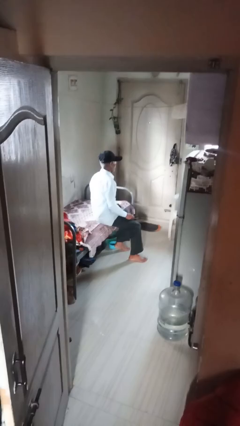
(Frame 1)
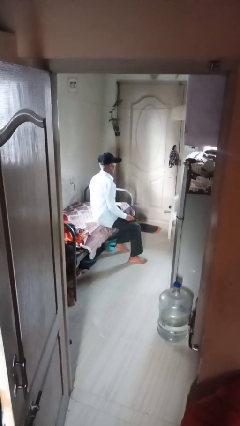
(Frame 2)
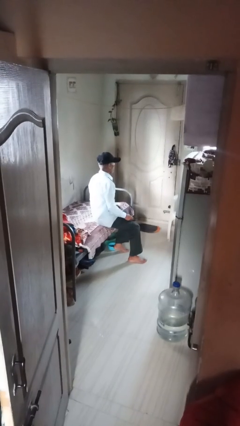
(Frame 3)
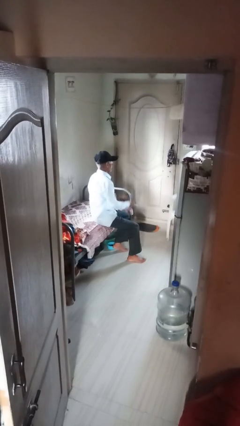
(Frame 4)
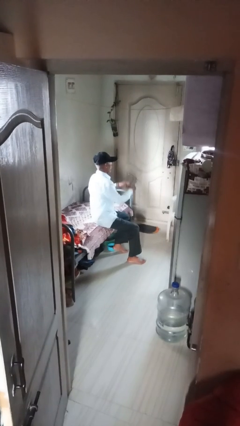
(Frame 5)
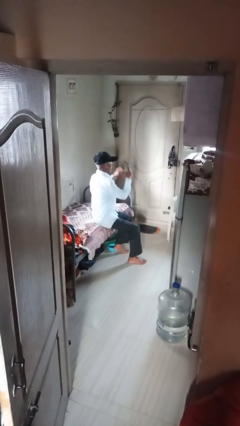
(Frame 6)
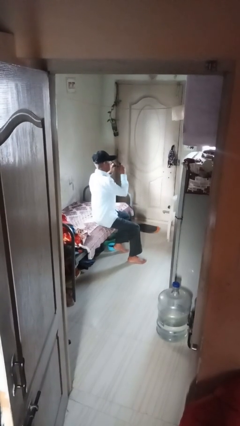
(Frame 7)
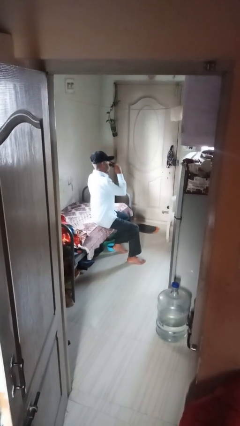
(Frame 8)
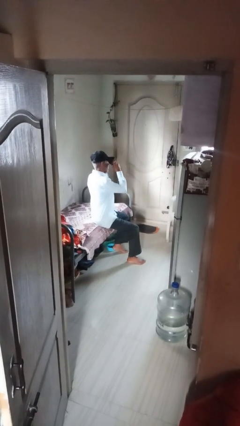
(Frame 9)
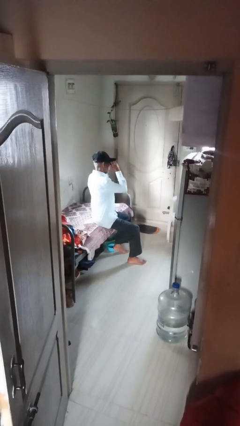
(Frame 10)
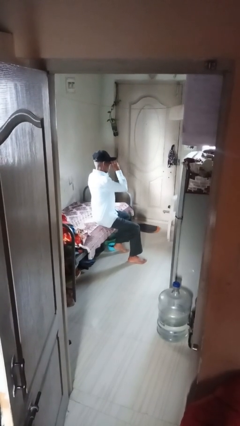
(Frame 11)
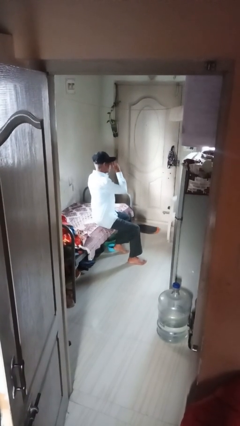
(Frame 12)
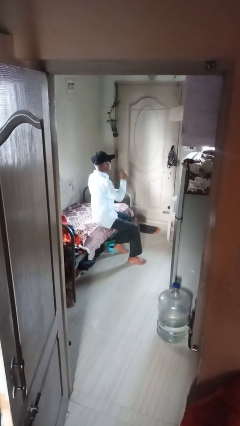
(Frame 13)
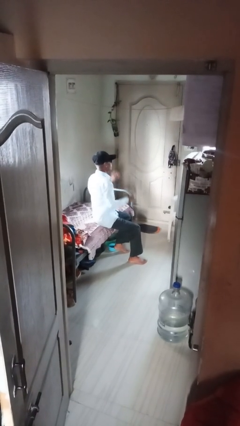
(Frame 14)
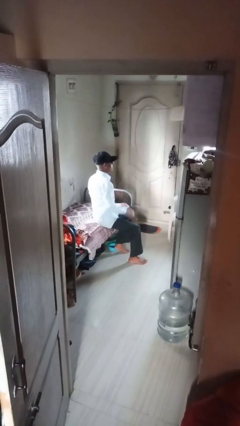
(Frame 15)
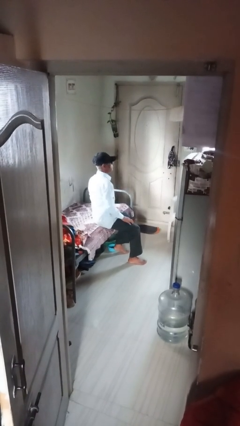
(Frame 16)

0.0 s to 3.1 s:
person puts on sunglasses

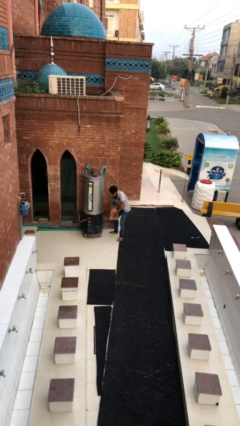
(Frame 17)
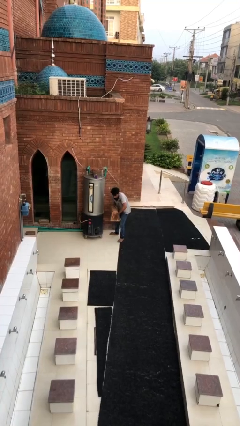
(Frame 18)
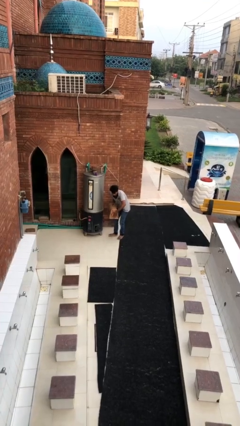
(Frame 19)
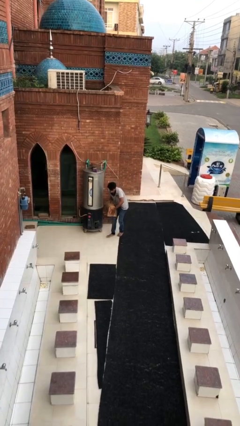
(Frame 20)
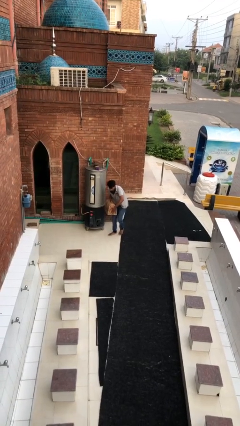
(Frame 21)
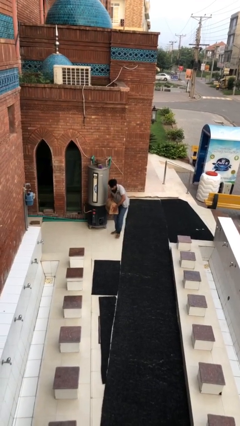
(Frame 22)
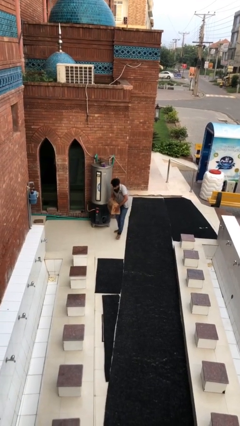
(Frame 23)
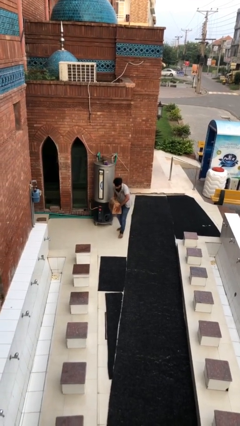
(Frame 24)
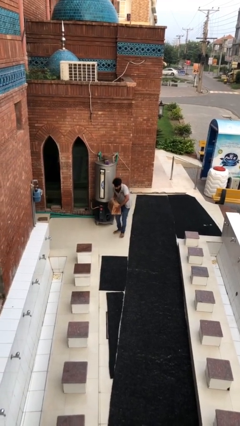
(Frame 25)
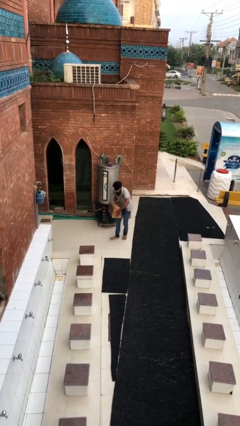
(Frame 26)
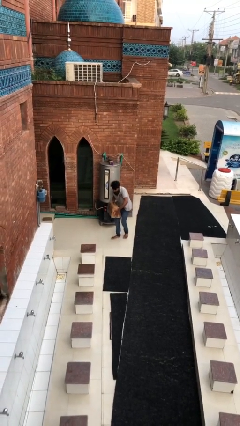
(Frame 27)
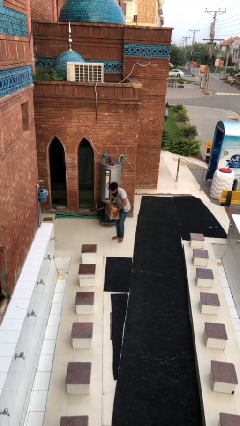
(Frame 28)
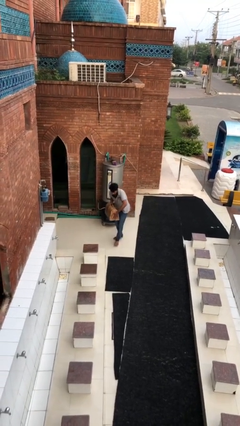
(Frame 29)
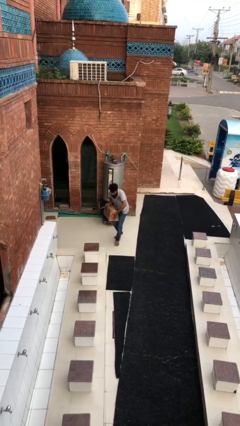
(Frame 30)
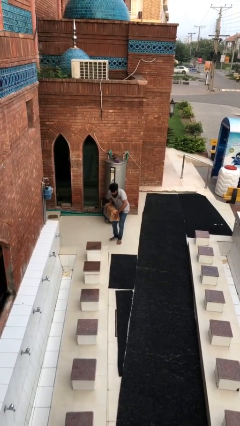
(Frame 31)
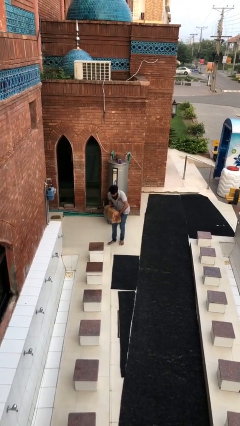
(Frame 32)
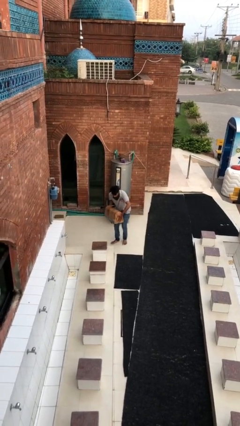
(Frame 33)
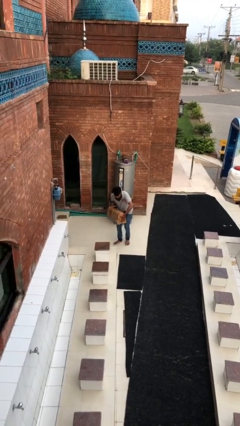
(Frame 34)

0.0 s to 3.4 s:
person carries heavy object

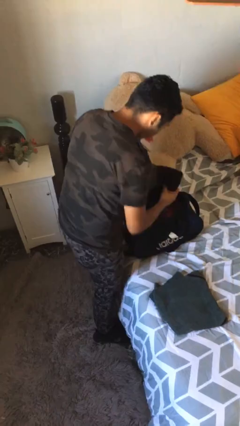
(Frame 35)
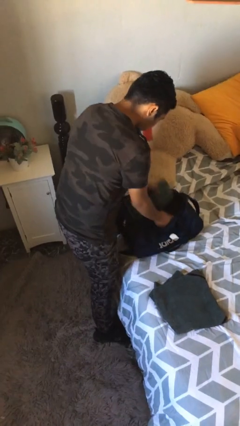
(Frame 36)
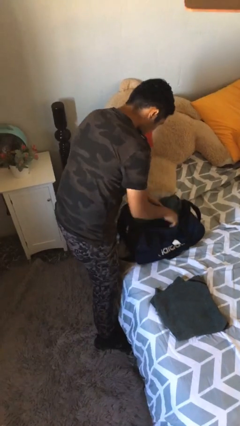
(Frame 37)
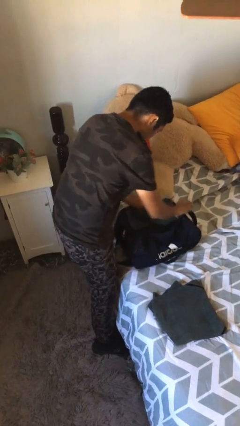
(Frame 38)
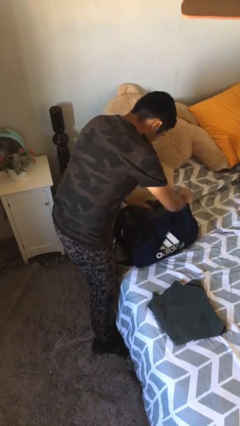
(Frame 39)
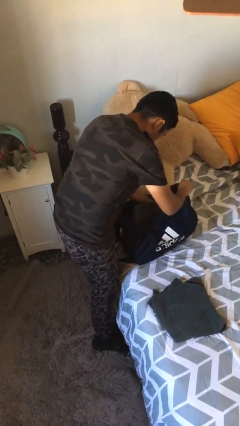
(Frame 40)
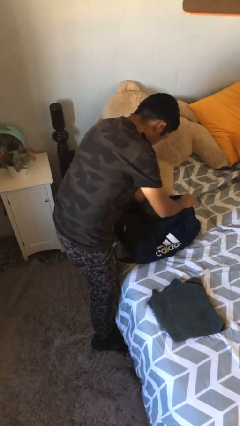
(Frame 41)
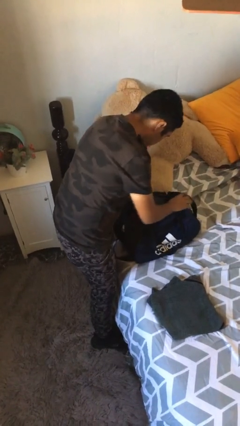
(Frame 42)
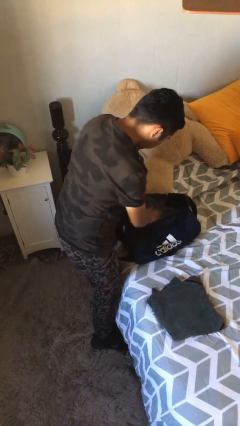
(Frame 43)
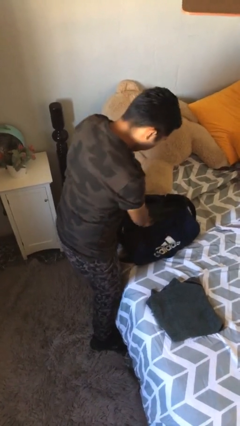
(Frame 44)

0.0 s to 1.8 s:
person loads clothes into suitcase

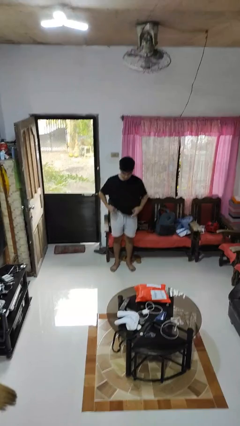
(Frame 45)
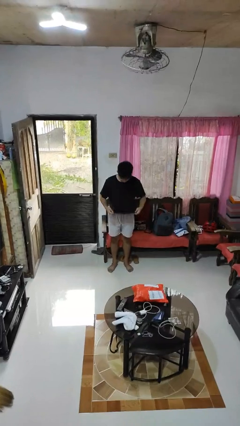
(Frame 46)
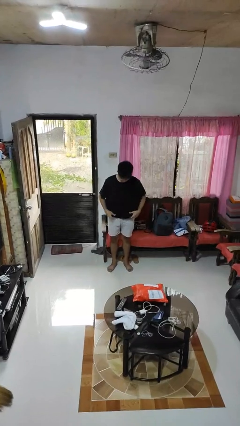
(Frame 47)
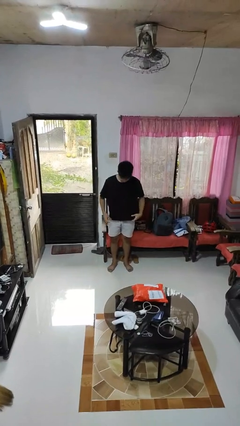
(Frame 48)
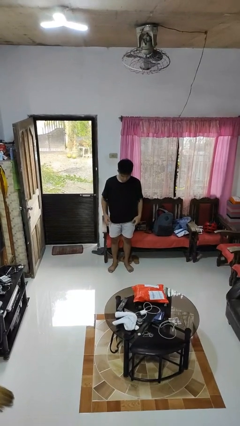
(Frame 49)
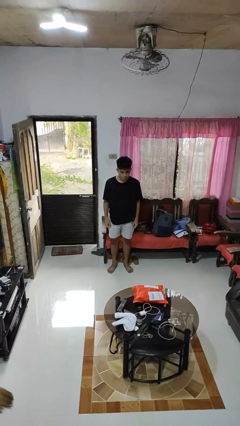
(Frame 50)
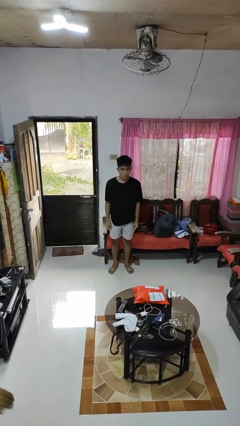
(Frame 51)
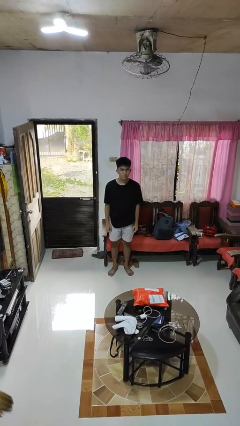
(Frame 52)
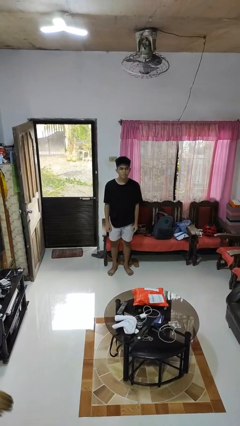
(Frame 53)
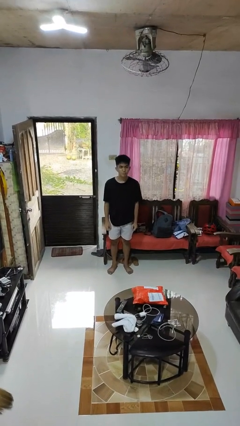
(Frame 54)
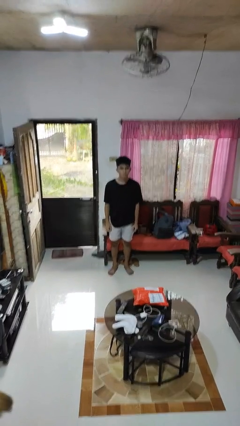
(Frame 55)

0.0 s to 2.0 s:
person untucks shirt

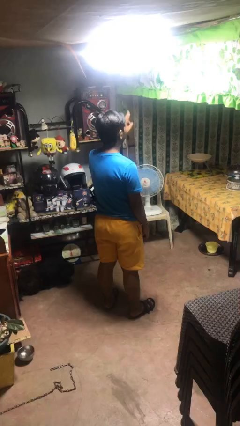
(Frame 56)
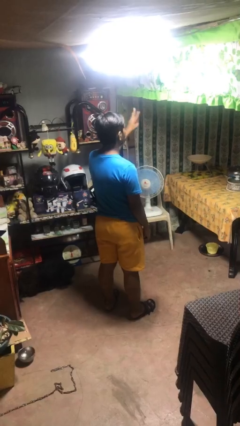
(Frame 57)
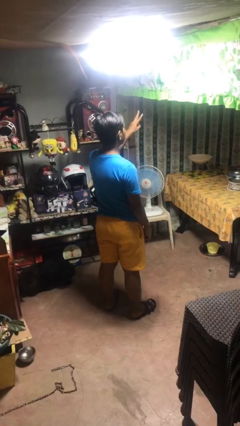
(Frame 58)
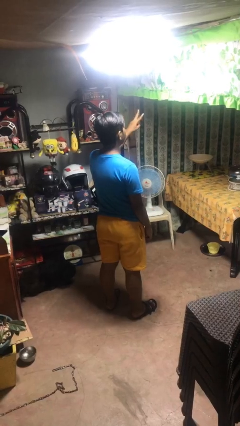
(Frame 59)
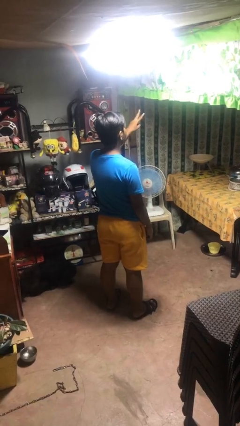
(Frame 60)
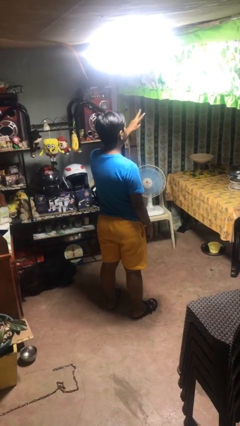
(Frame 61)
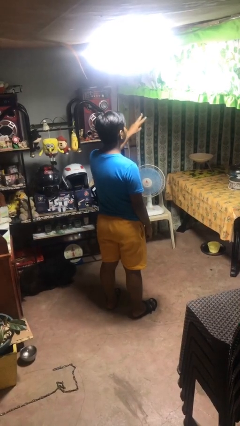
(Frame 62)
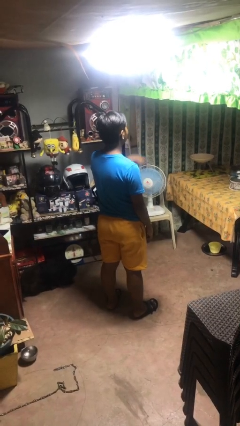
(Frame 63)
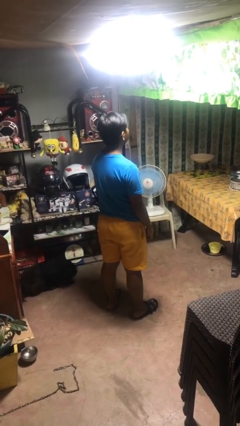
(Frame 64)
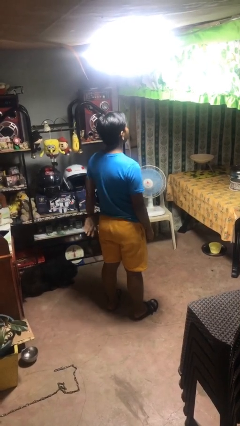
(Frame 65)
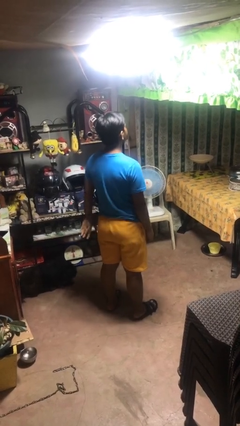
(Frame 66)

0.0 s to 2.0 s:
person gestures peace

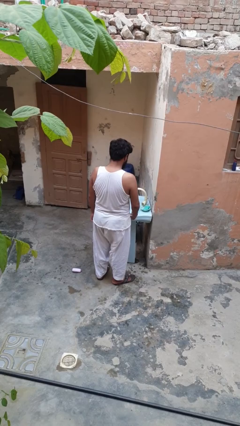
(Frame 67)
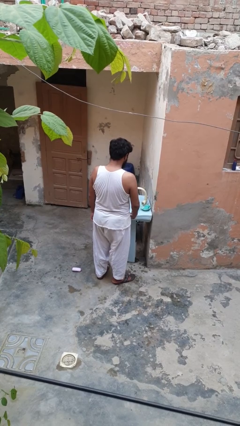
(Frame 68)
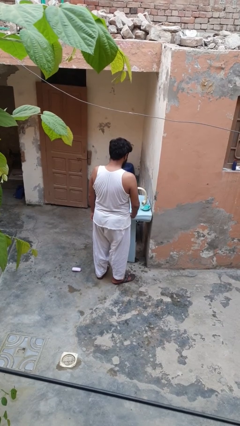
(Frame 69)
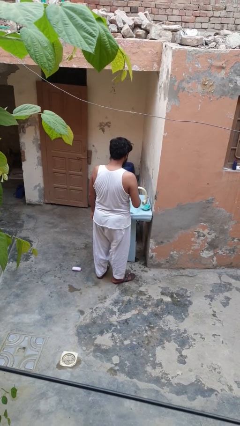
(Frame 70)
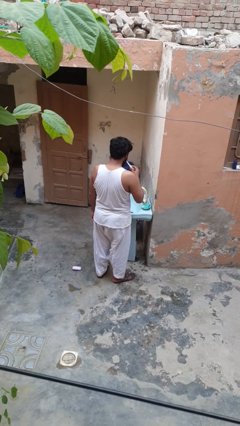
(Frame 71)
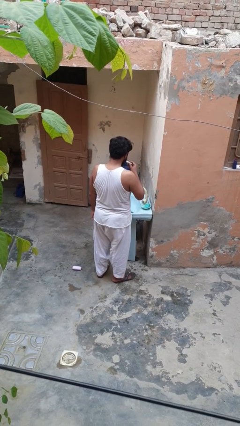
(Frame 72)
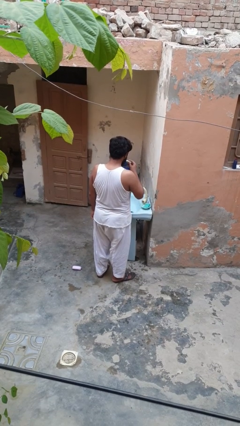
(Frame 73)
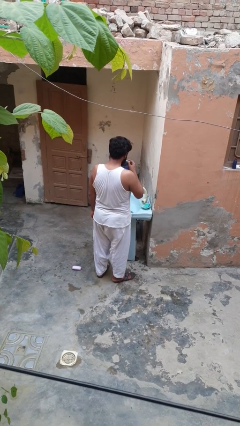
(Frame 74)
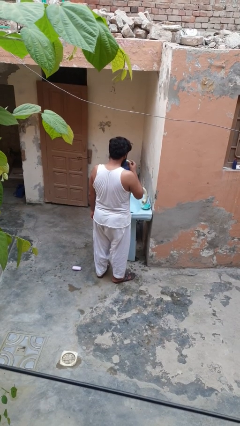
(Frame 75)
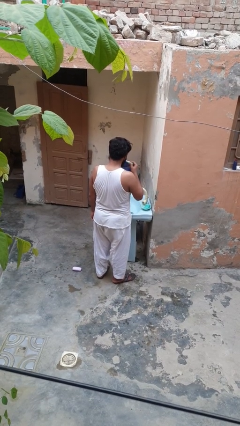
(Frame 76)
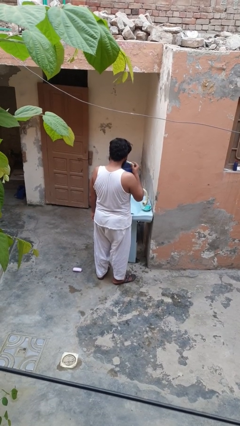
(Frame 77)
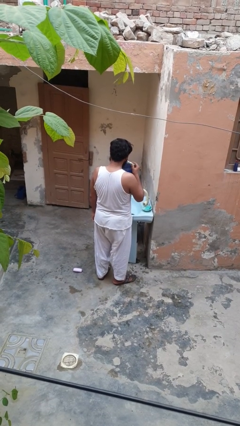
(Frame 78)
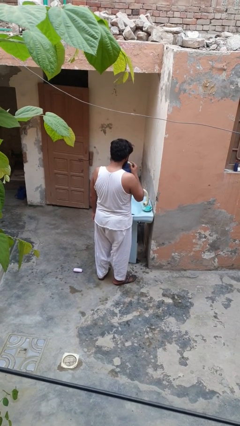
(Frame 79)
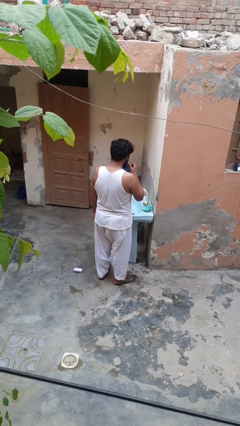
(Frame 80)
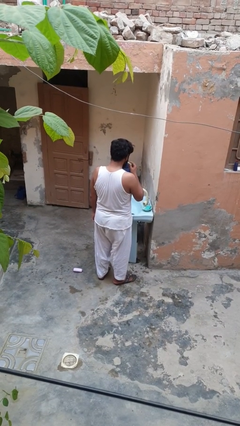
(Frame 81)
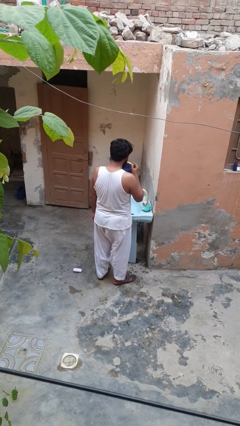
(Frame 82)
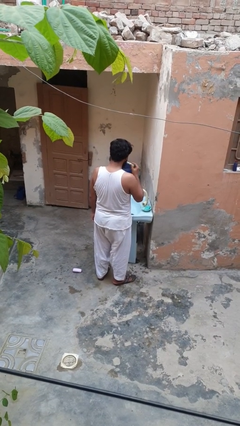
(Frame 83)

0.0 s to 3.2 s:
person brushes teeth

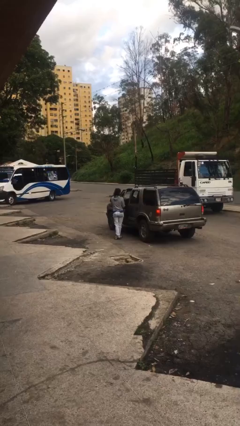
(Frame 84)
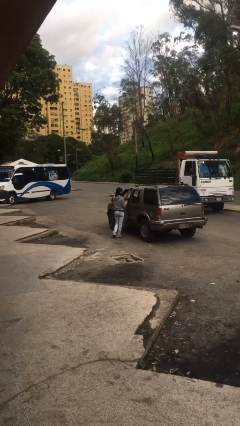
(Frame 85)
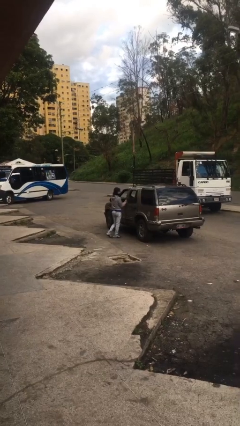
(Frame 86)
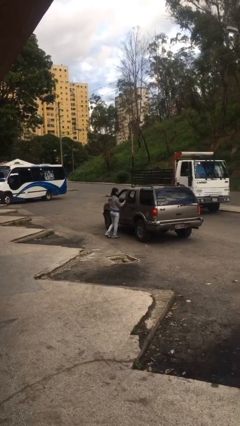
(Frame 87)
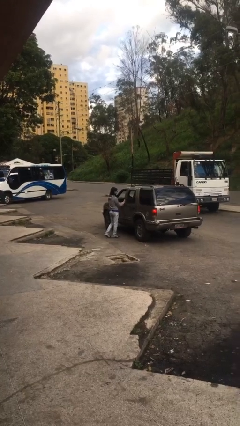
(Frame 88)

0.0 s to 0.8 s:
person closes car door

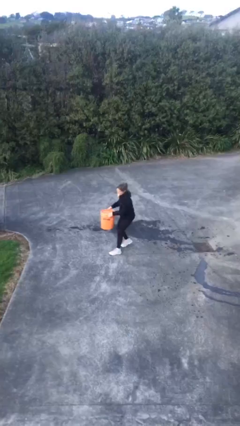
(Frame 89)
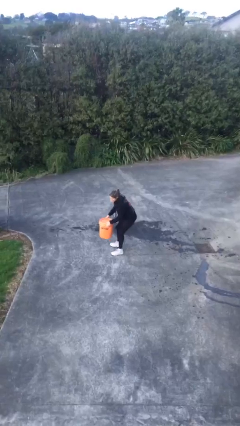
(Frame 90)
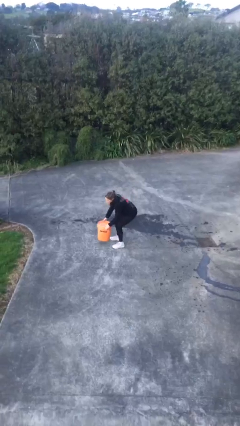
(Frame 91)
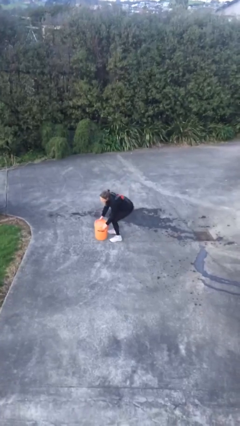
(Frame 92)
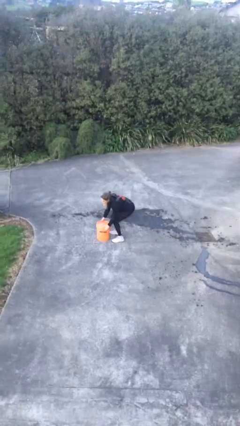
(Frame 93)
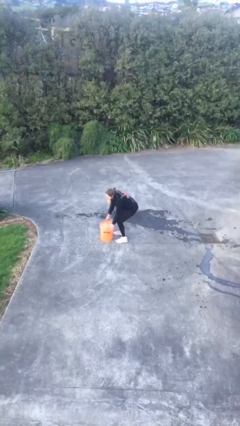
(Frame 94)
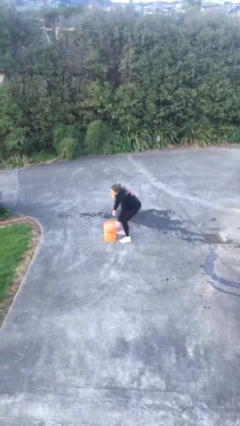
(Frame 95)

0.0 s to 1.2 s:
person puts down object on floor
